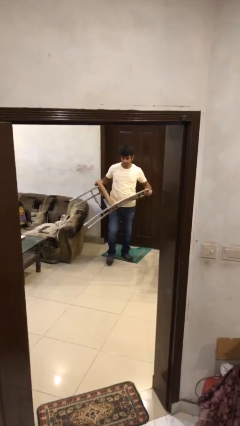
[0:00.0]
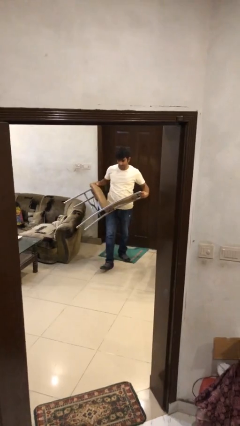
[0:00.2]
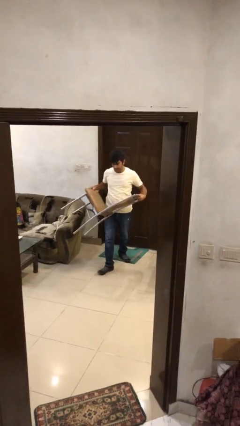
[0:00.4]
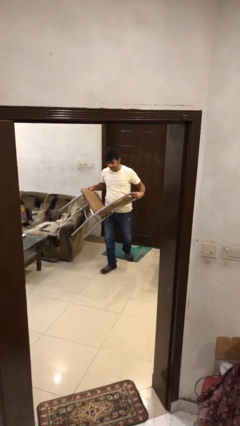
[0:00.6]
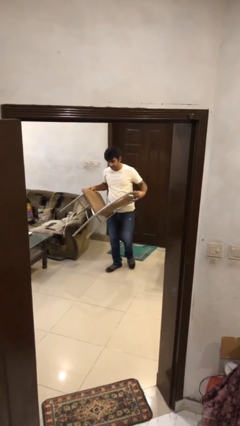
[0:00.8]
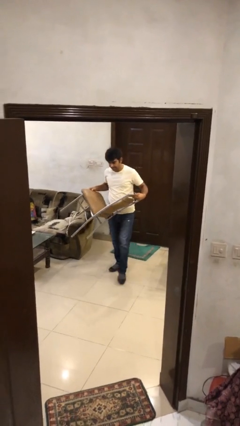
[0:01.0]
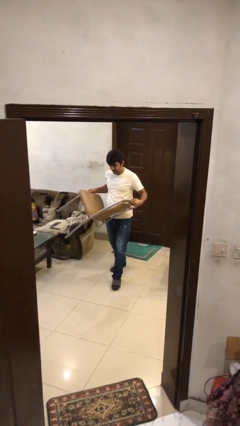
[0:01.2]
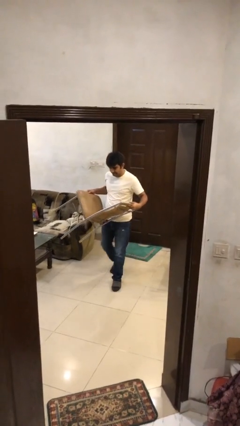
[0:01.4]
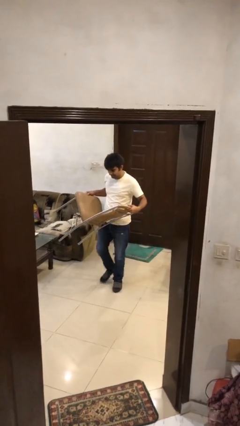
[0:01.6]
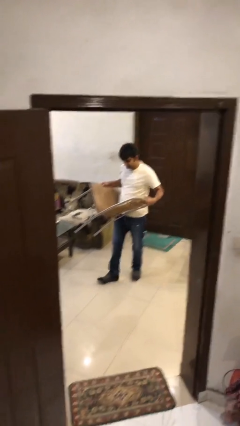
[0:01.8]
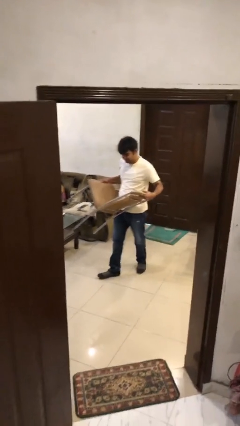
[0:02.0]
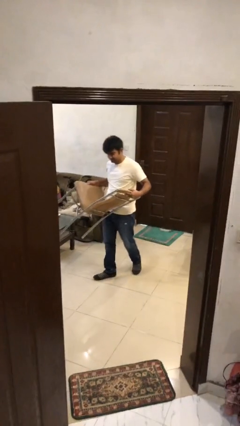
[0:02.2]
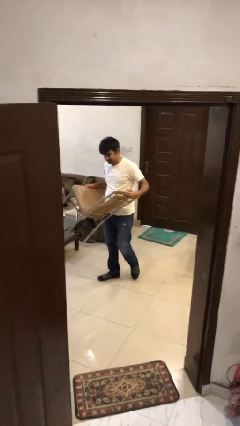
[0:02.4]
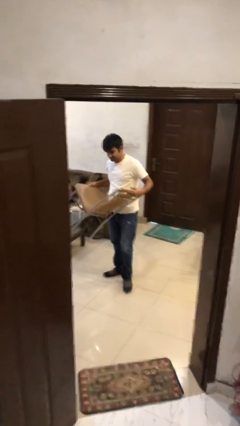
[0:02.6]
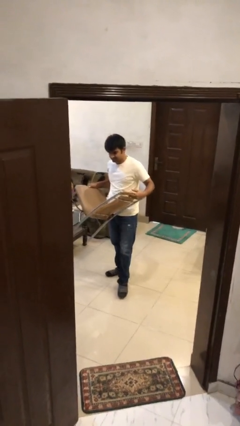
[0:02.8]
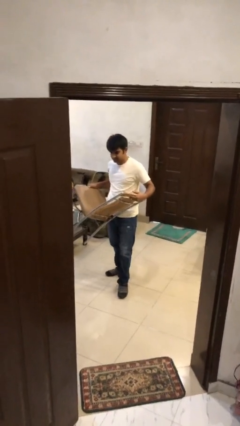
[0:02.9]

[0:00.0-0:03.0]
person carries heavy object

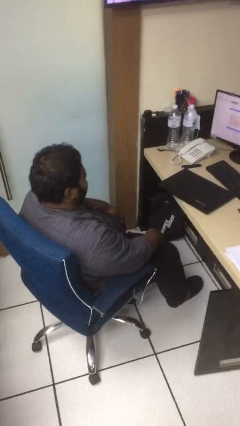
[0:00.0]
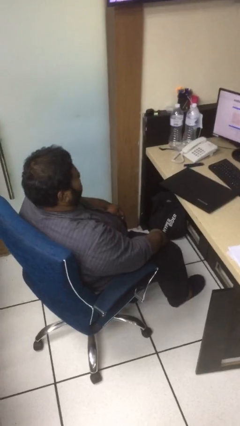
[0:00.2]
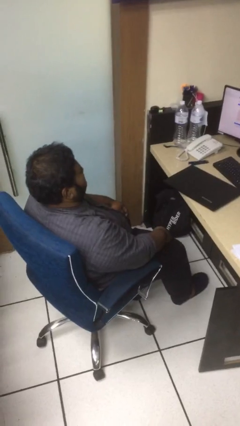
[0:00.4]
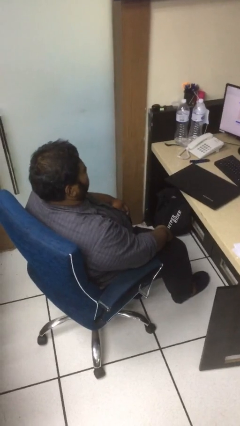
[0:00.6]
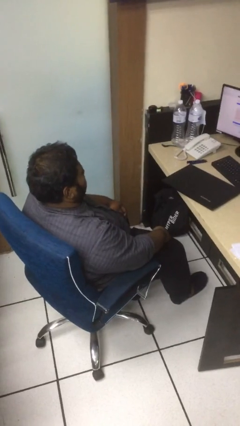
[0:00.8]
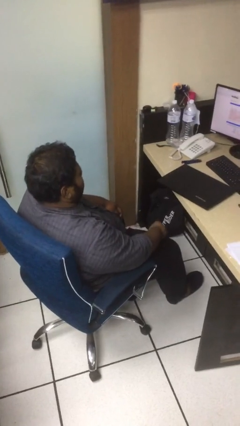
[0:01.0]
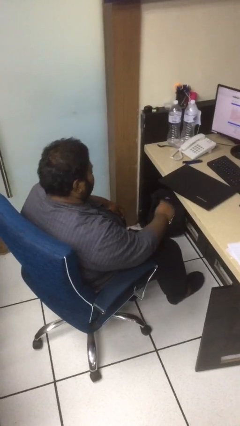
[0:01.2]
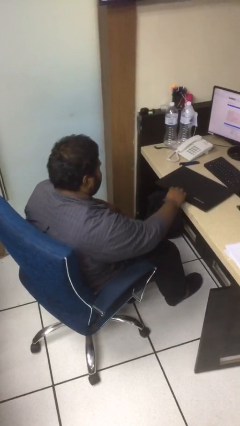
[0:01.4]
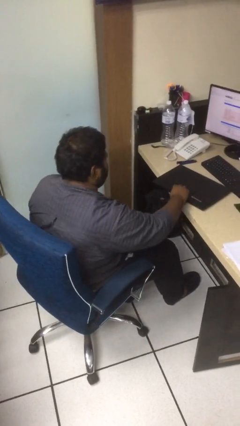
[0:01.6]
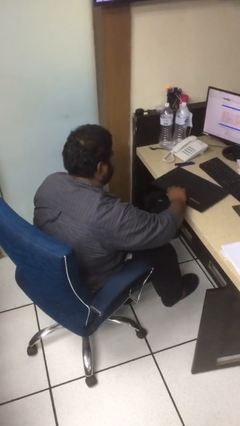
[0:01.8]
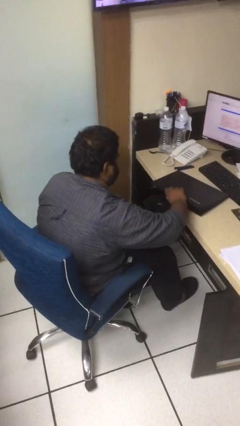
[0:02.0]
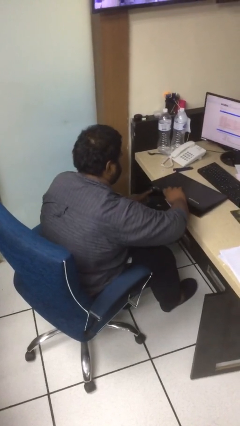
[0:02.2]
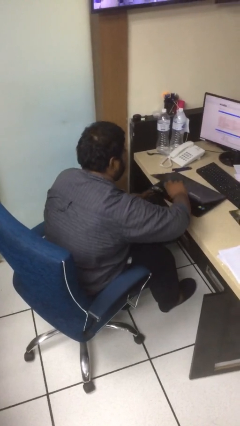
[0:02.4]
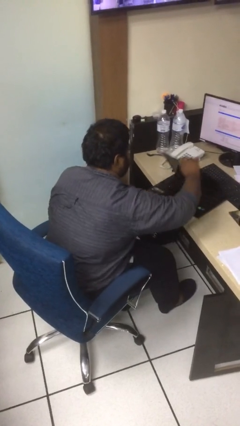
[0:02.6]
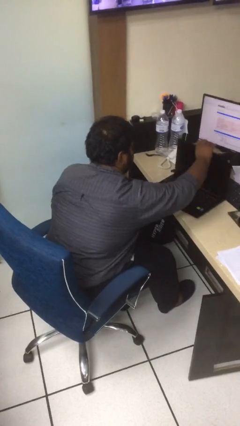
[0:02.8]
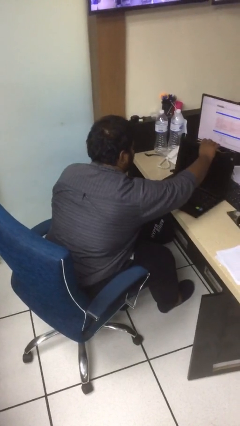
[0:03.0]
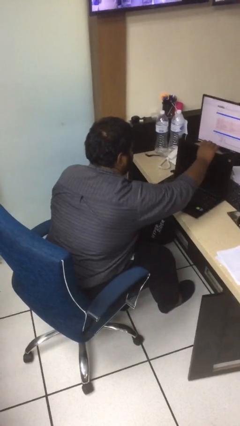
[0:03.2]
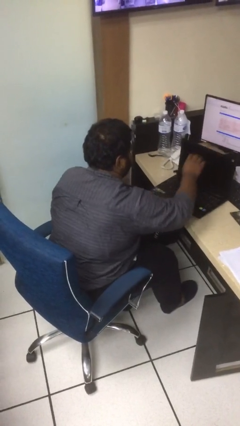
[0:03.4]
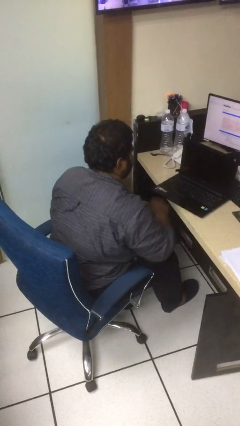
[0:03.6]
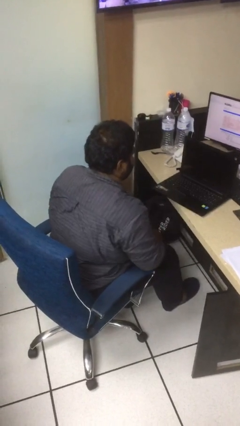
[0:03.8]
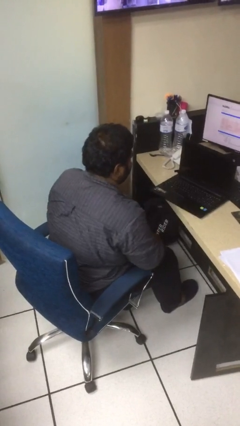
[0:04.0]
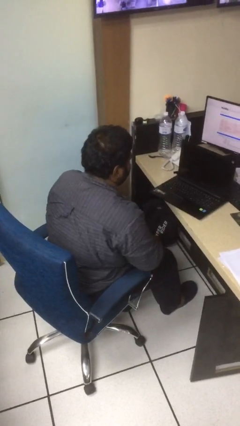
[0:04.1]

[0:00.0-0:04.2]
person opens laptop

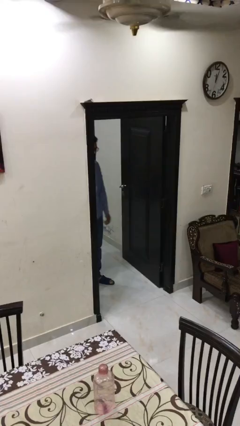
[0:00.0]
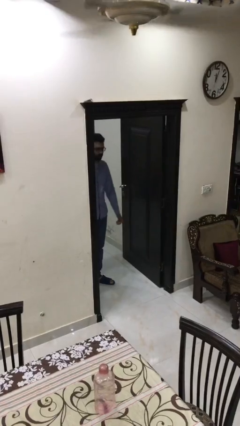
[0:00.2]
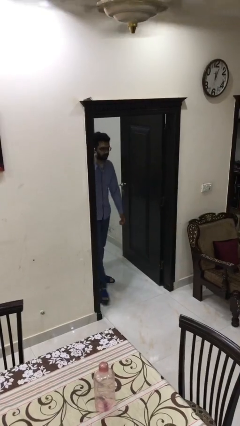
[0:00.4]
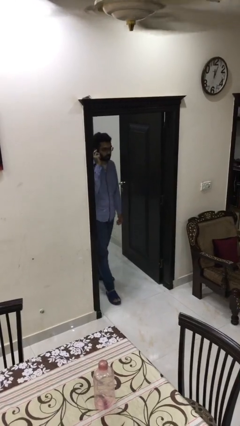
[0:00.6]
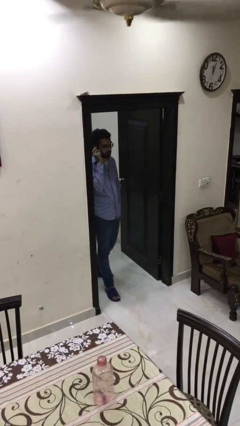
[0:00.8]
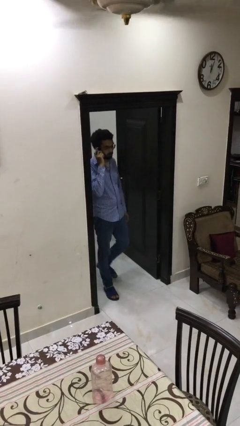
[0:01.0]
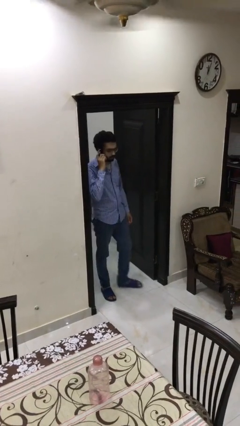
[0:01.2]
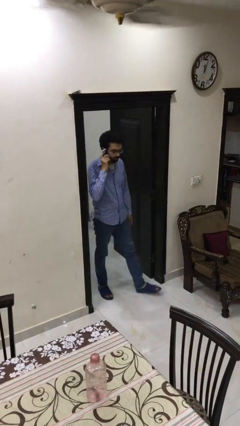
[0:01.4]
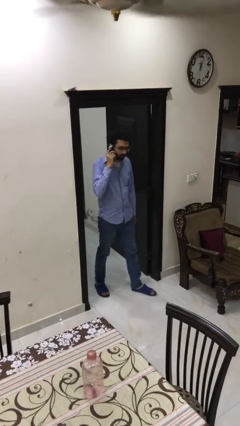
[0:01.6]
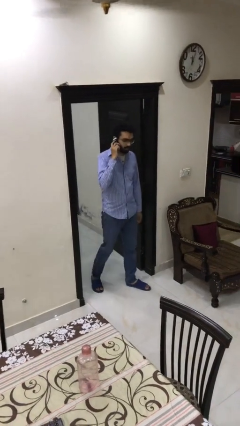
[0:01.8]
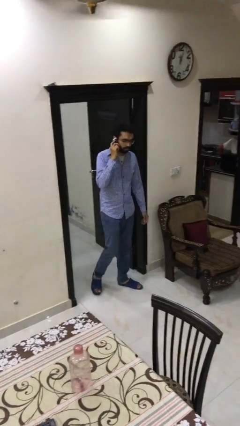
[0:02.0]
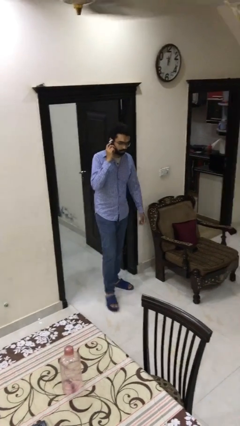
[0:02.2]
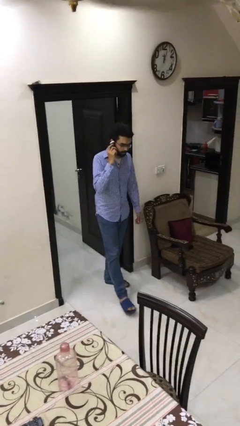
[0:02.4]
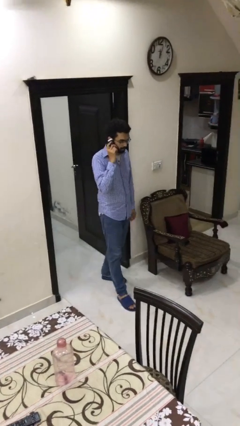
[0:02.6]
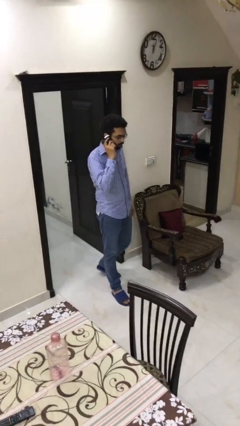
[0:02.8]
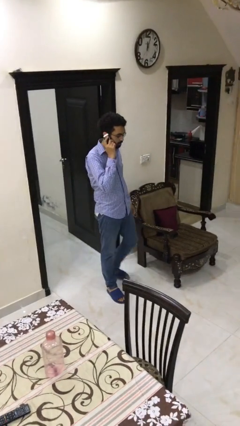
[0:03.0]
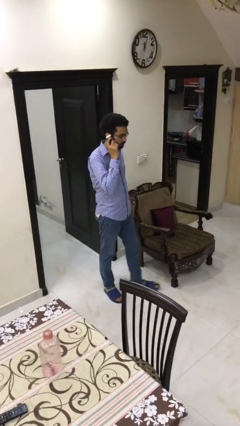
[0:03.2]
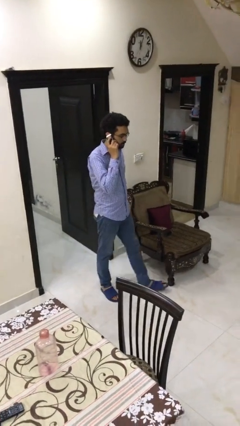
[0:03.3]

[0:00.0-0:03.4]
person enters scene through structure

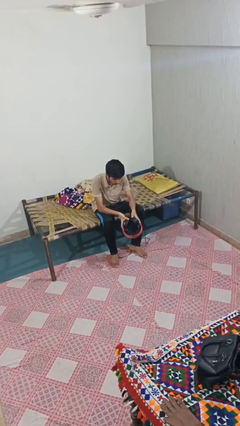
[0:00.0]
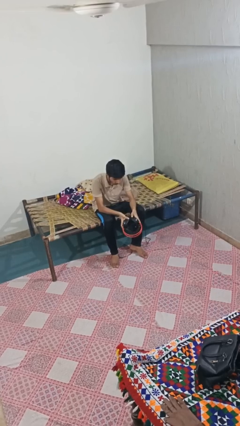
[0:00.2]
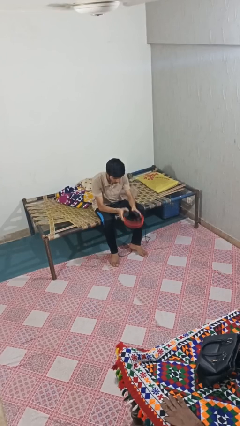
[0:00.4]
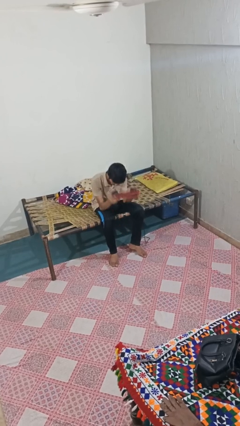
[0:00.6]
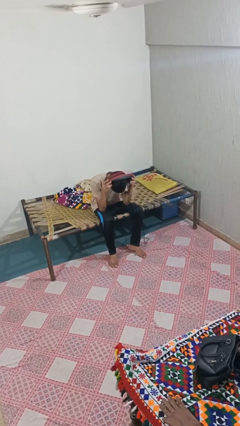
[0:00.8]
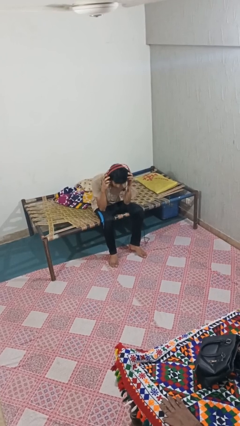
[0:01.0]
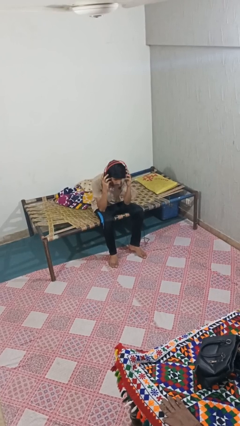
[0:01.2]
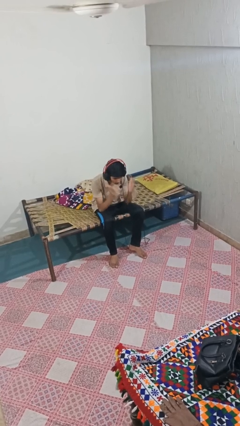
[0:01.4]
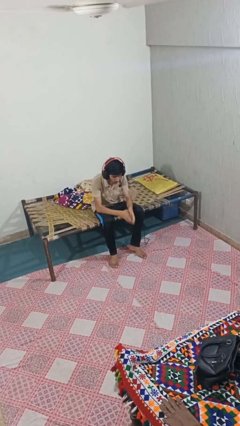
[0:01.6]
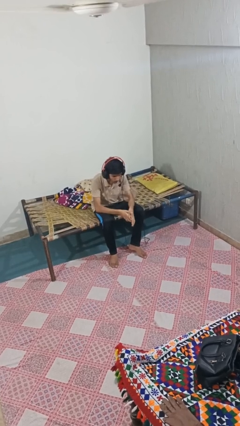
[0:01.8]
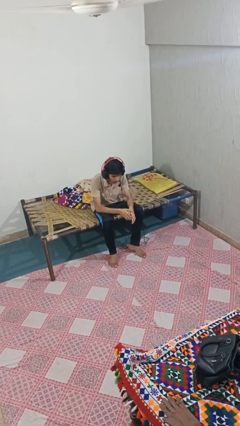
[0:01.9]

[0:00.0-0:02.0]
person puts on headphones

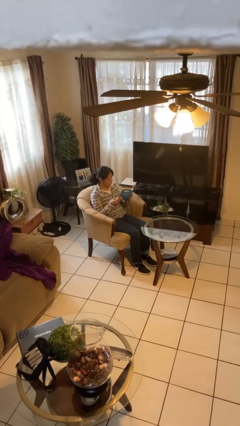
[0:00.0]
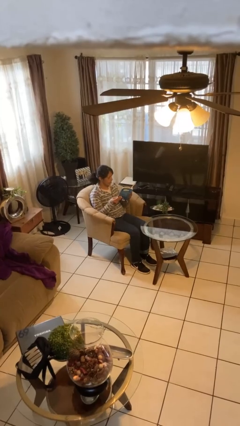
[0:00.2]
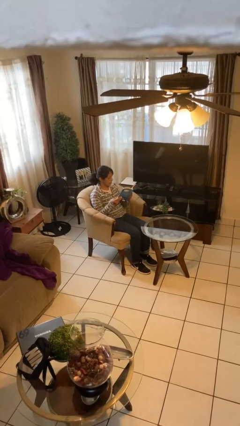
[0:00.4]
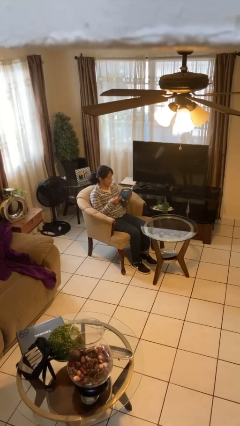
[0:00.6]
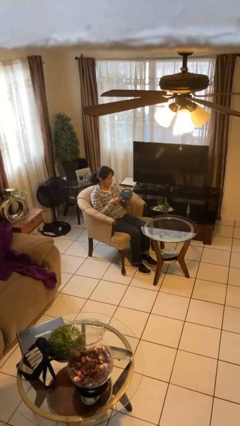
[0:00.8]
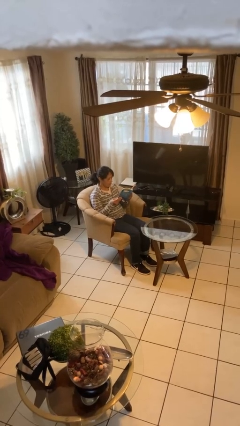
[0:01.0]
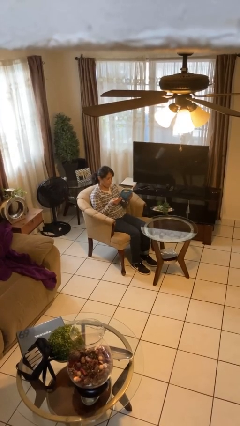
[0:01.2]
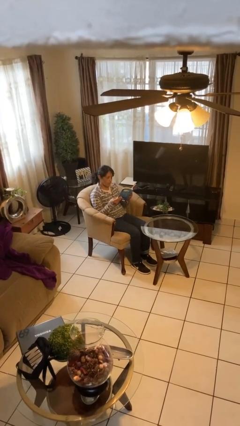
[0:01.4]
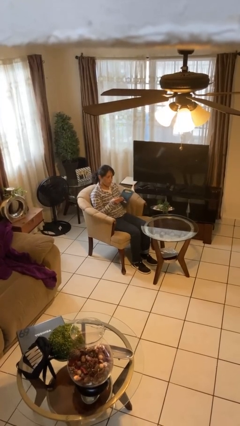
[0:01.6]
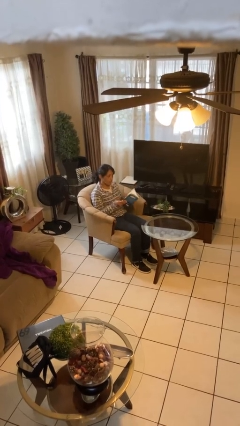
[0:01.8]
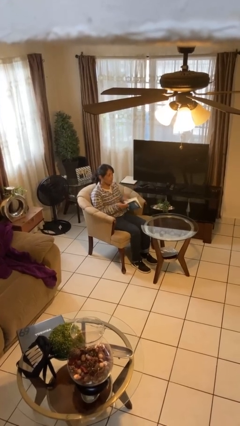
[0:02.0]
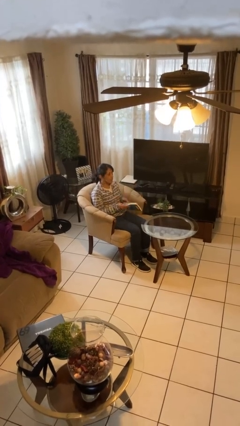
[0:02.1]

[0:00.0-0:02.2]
person reads document

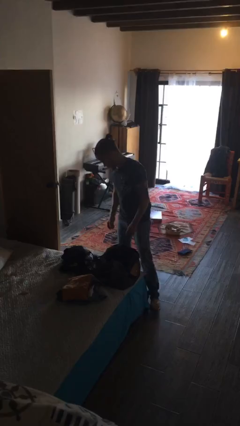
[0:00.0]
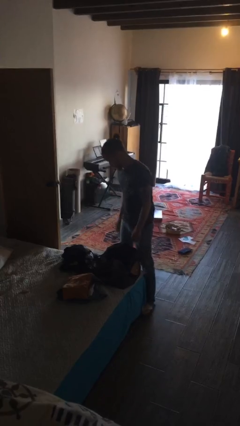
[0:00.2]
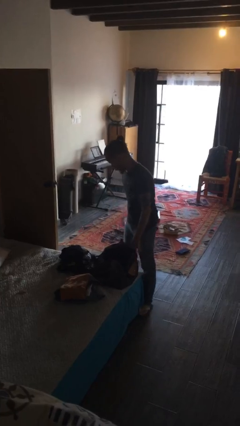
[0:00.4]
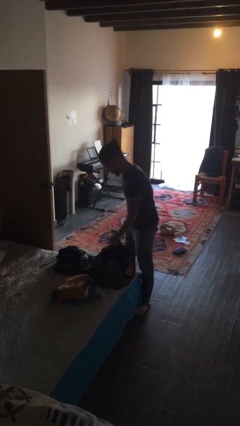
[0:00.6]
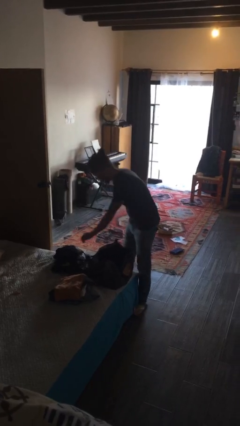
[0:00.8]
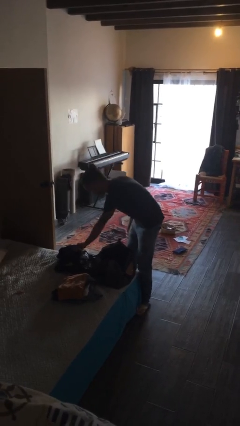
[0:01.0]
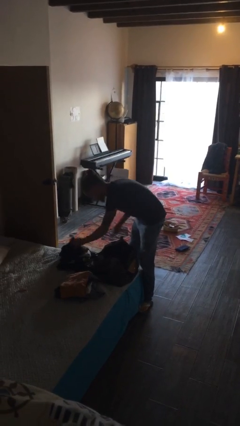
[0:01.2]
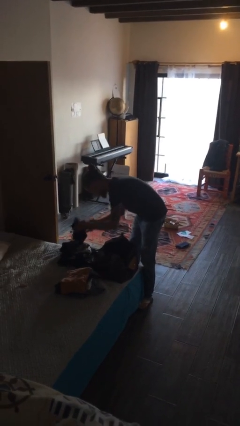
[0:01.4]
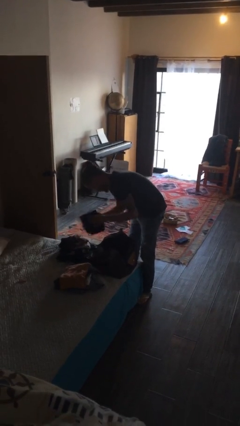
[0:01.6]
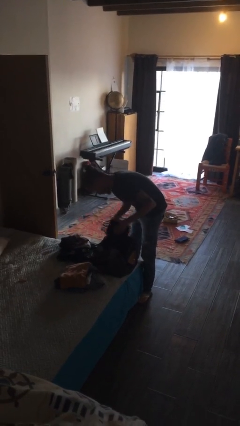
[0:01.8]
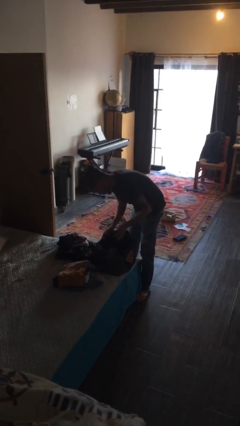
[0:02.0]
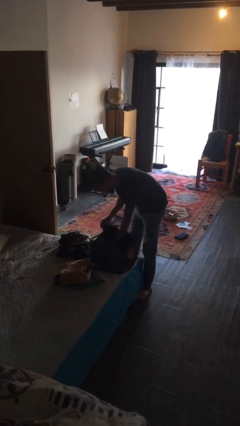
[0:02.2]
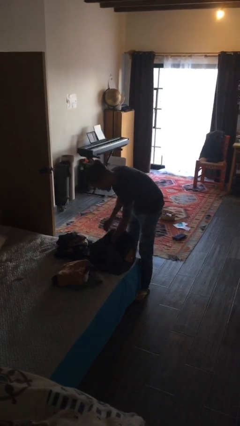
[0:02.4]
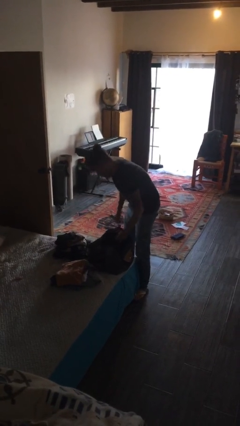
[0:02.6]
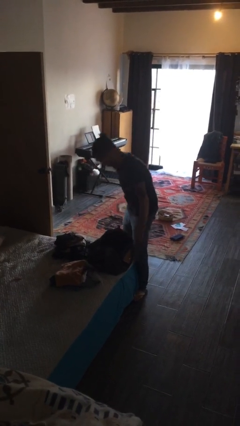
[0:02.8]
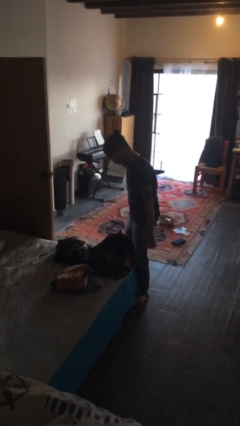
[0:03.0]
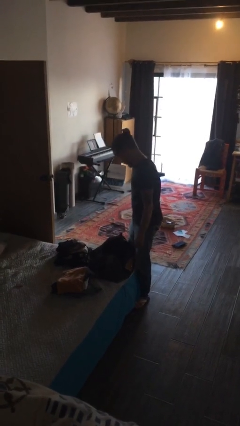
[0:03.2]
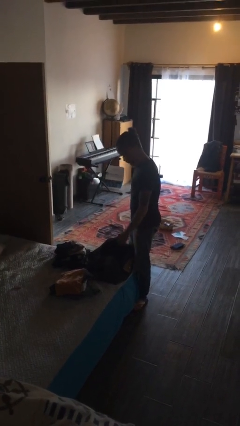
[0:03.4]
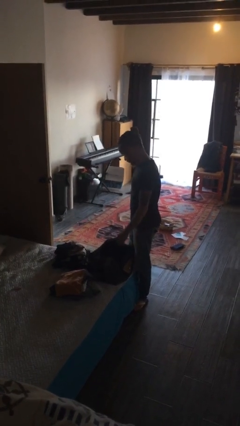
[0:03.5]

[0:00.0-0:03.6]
person loads clothes into suitcase
